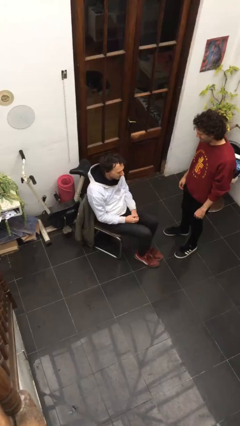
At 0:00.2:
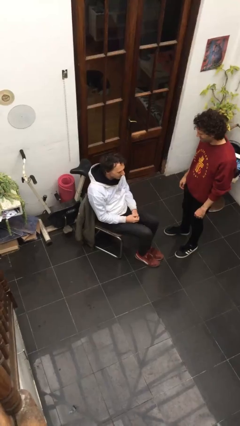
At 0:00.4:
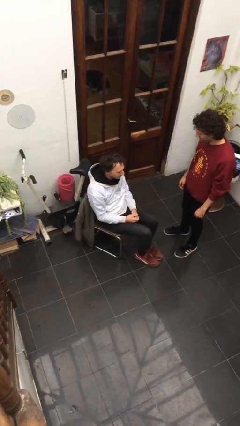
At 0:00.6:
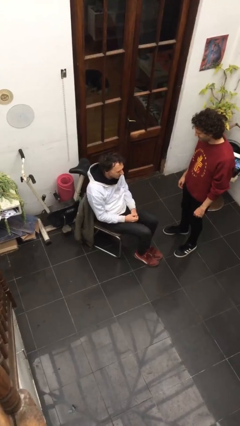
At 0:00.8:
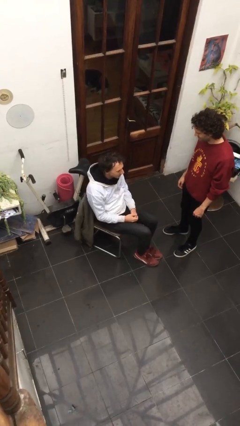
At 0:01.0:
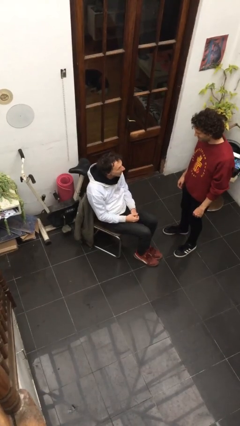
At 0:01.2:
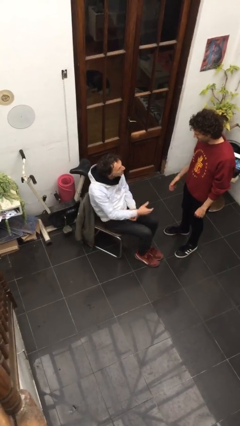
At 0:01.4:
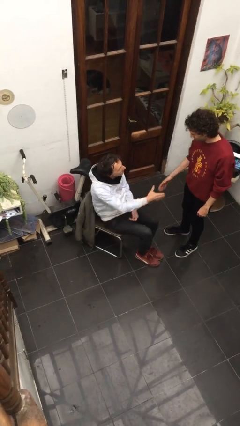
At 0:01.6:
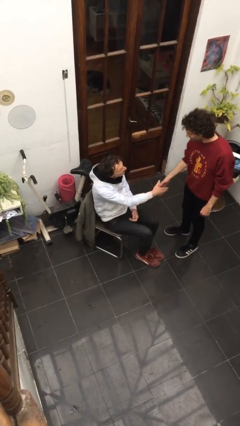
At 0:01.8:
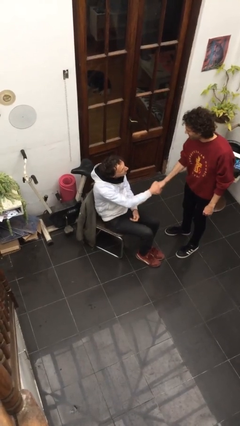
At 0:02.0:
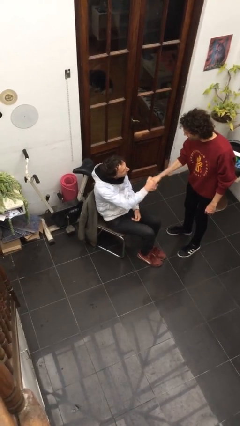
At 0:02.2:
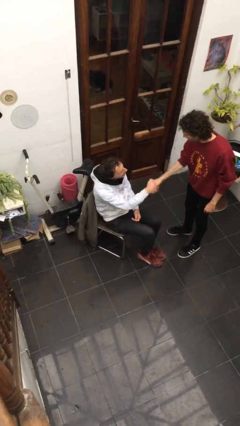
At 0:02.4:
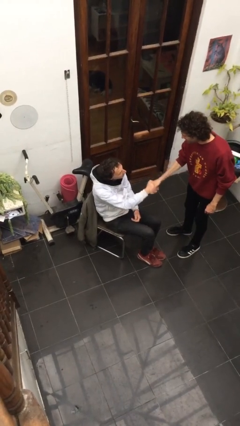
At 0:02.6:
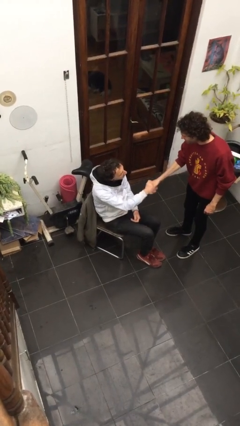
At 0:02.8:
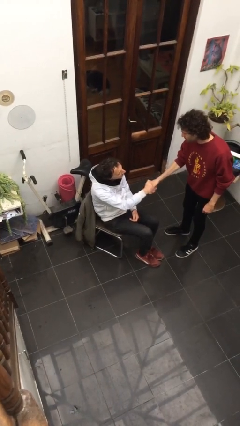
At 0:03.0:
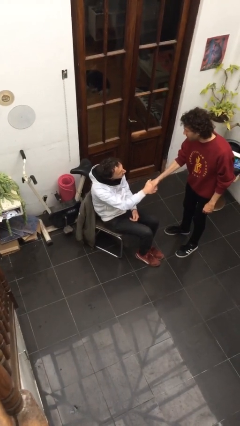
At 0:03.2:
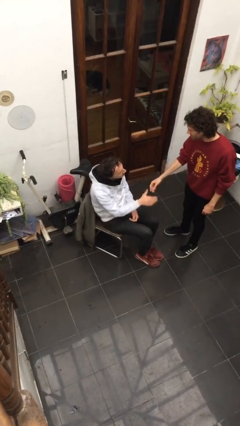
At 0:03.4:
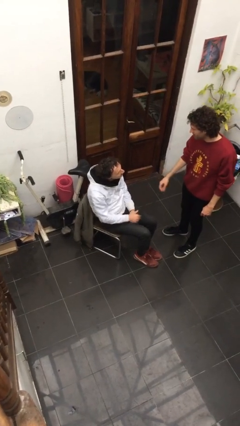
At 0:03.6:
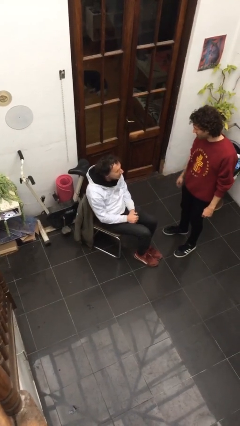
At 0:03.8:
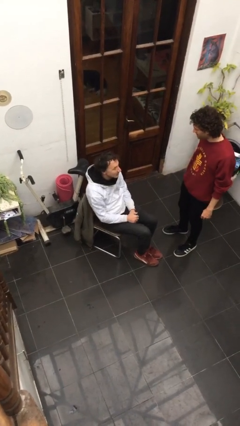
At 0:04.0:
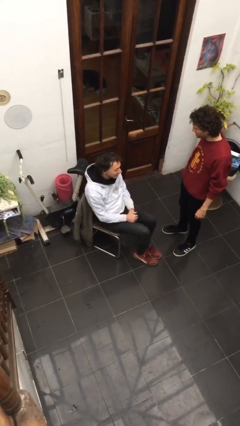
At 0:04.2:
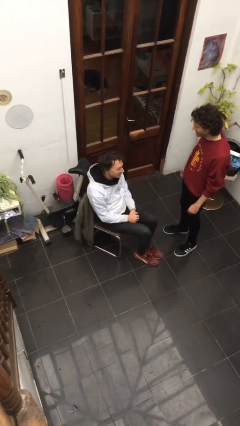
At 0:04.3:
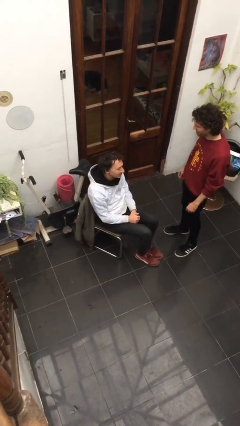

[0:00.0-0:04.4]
person shakes hand

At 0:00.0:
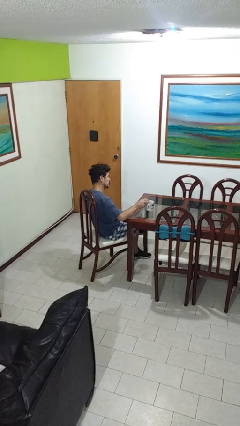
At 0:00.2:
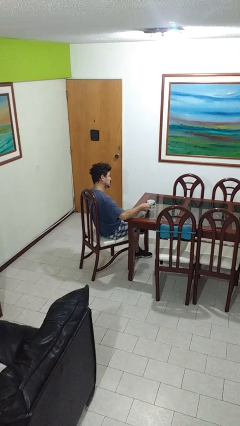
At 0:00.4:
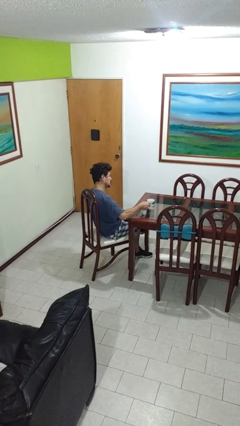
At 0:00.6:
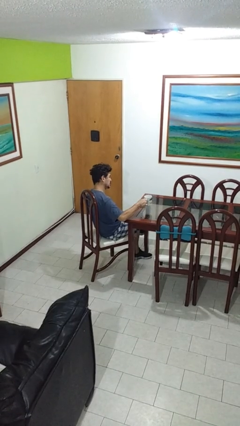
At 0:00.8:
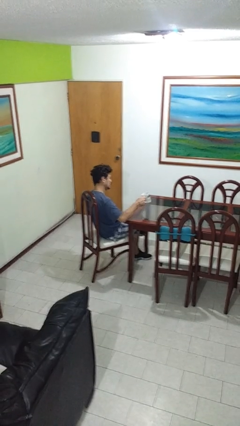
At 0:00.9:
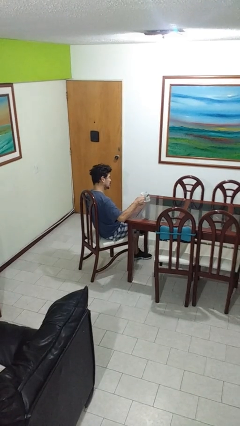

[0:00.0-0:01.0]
person picks up object from table

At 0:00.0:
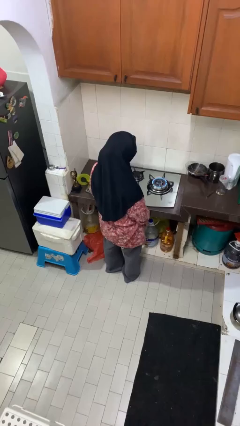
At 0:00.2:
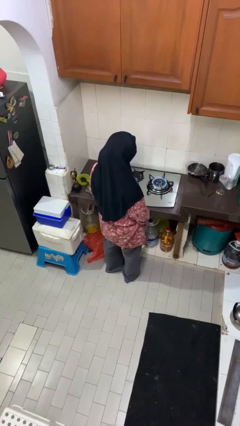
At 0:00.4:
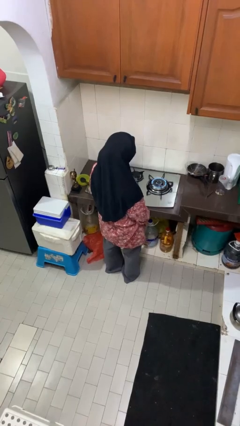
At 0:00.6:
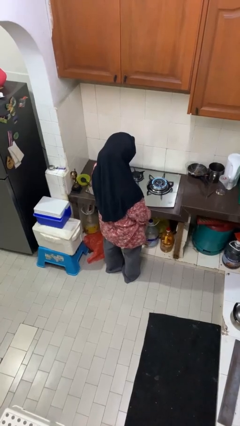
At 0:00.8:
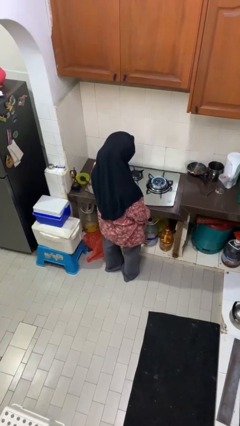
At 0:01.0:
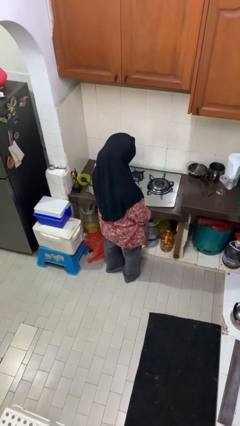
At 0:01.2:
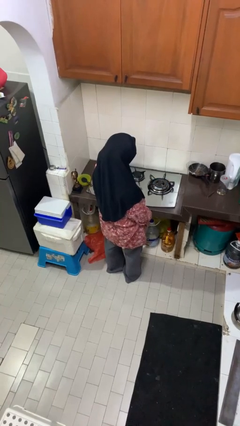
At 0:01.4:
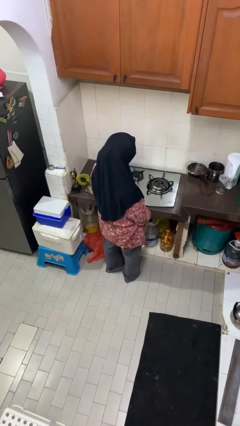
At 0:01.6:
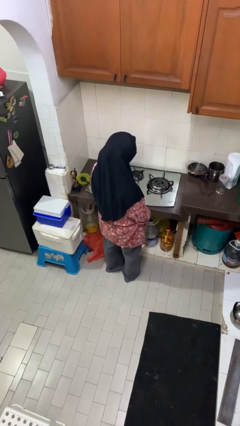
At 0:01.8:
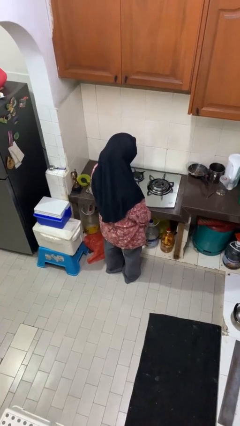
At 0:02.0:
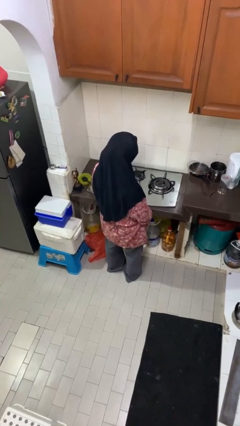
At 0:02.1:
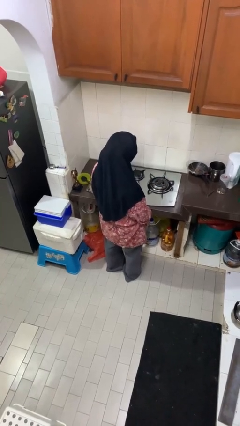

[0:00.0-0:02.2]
person turns off stovetop

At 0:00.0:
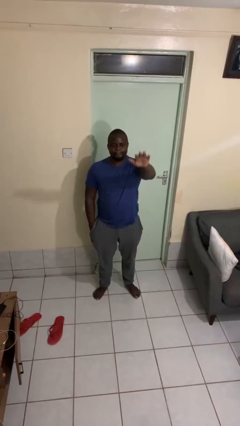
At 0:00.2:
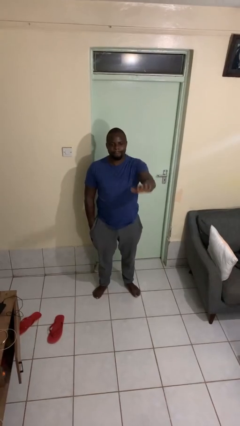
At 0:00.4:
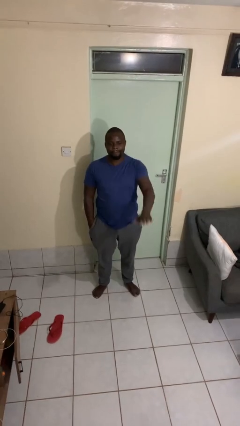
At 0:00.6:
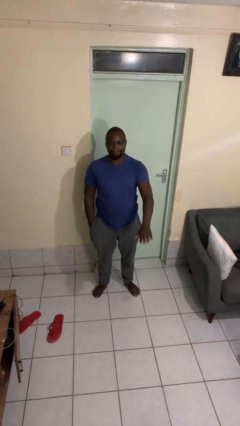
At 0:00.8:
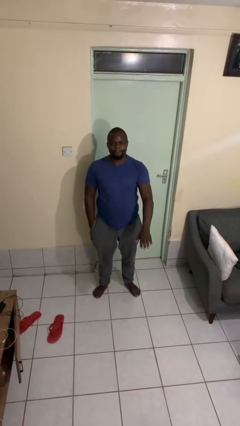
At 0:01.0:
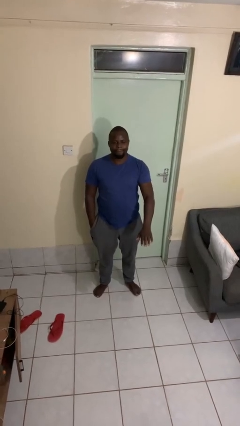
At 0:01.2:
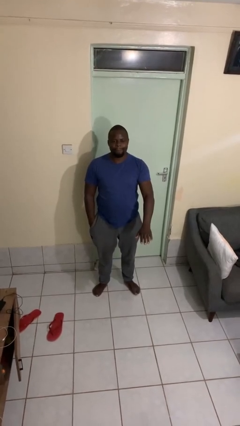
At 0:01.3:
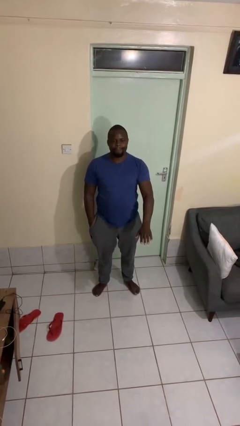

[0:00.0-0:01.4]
person gestures swipe down

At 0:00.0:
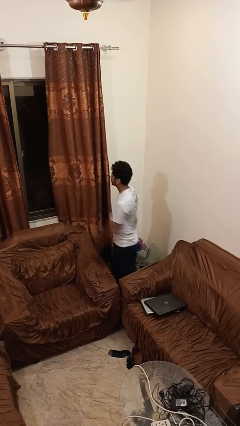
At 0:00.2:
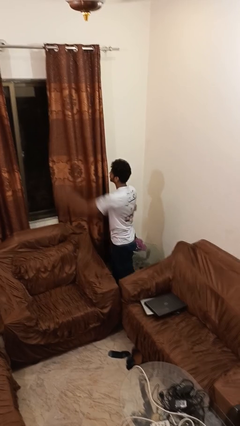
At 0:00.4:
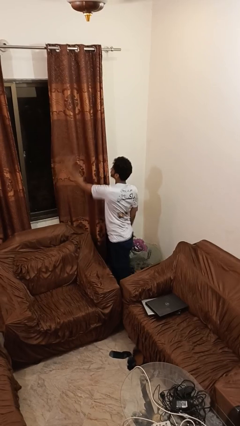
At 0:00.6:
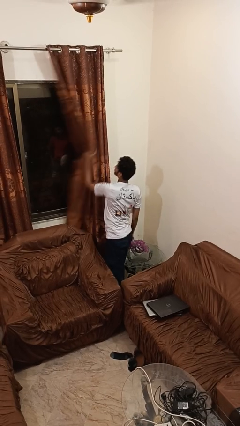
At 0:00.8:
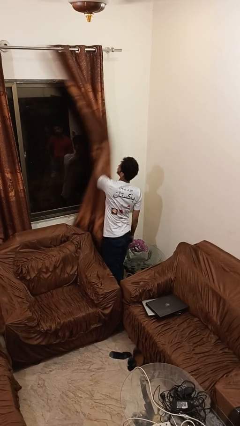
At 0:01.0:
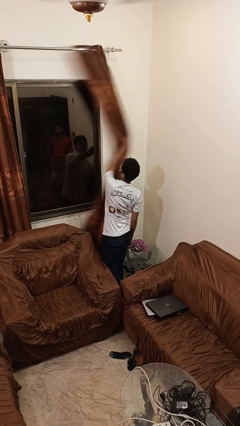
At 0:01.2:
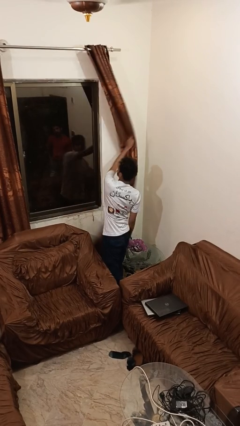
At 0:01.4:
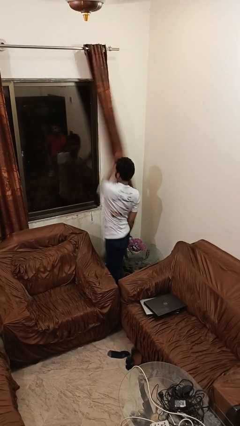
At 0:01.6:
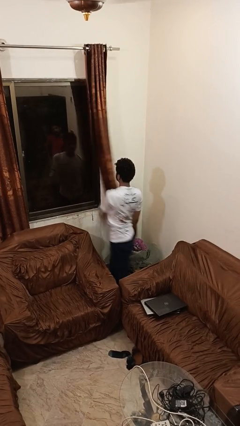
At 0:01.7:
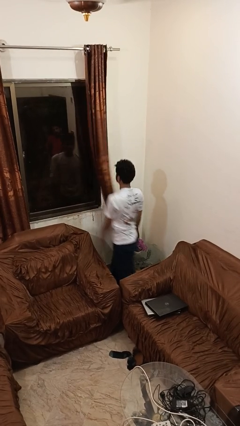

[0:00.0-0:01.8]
person opens curtains

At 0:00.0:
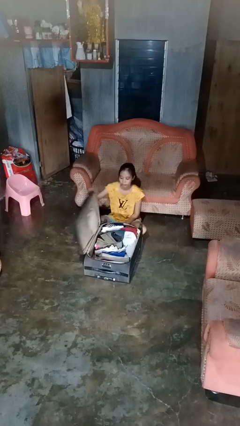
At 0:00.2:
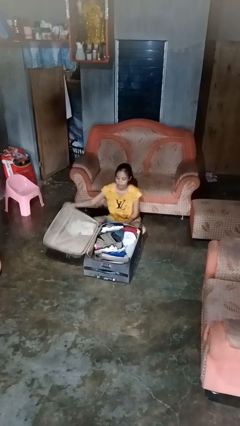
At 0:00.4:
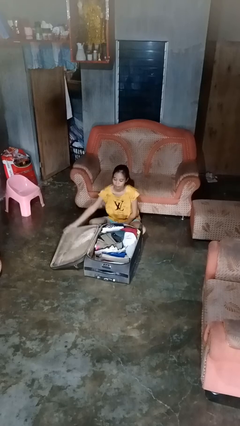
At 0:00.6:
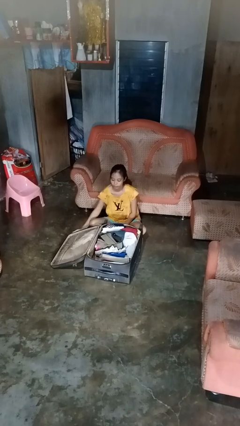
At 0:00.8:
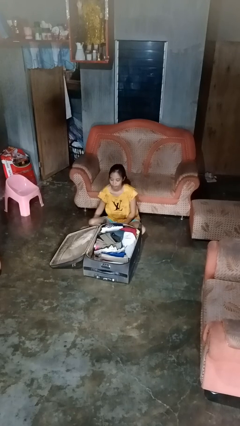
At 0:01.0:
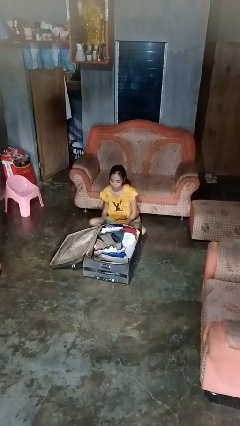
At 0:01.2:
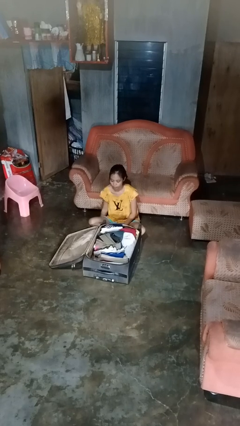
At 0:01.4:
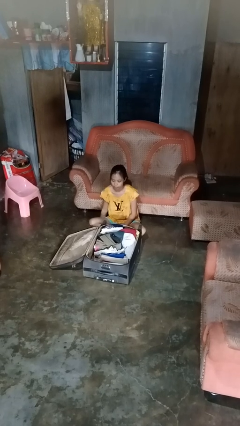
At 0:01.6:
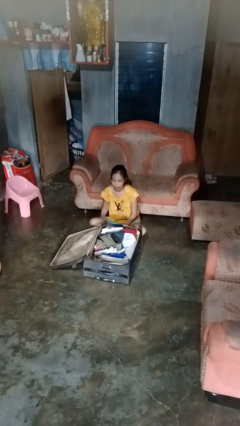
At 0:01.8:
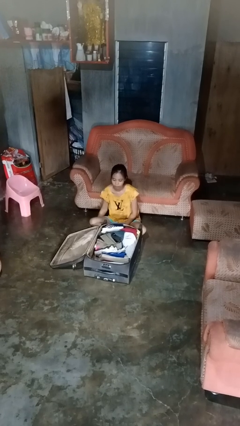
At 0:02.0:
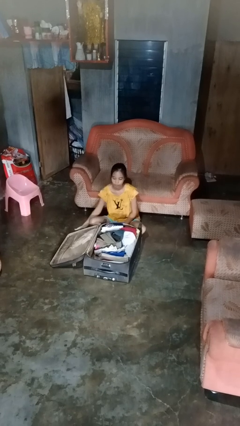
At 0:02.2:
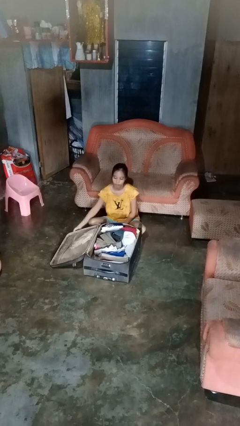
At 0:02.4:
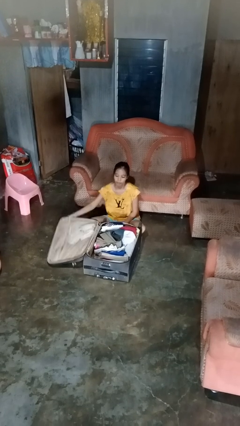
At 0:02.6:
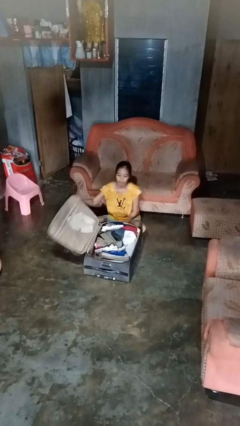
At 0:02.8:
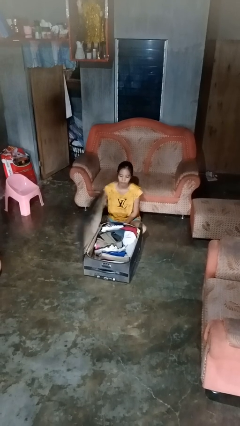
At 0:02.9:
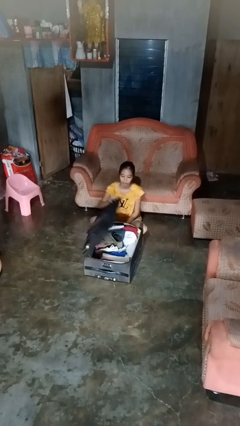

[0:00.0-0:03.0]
person opens suitcase

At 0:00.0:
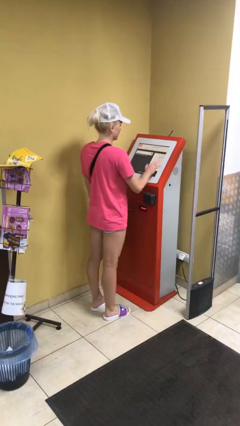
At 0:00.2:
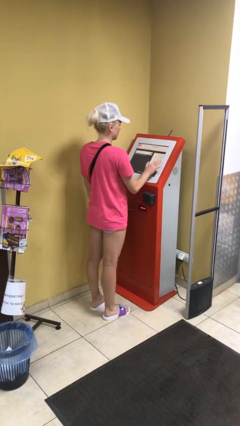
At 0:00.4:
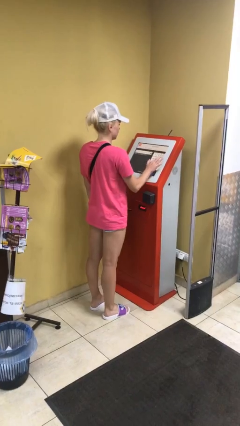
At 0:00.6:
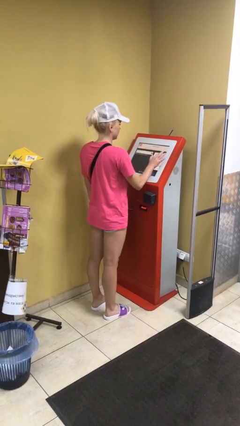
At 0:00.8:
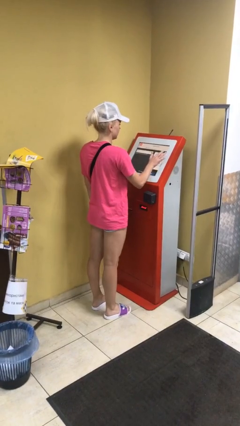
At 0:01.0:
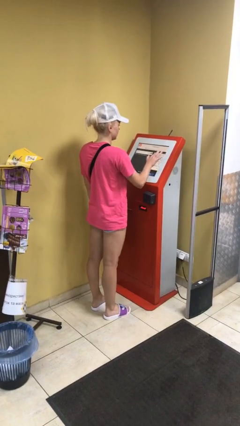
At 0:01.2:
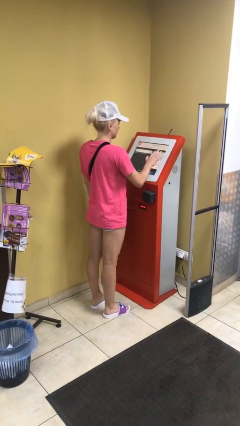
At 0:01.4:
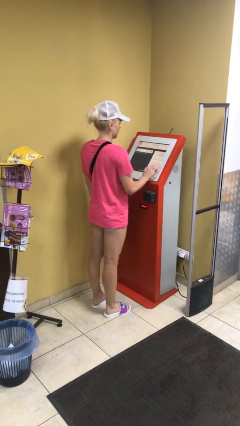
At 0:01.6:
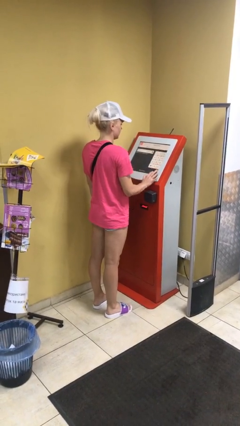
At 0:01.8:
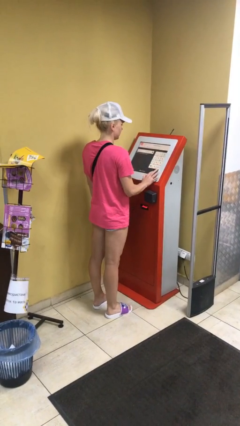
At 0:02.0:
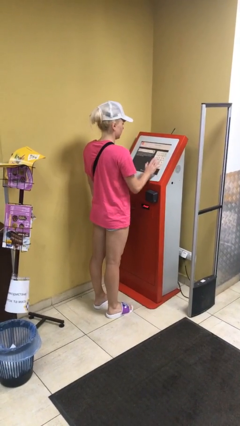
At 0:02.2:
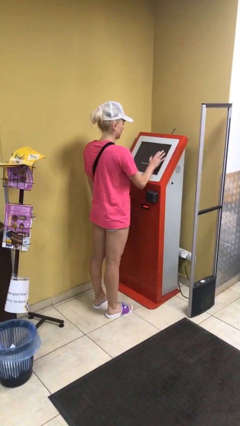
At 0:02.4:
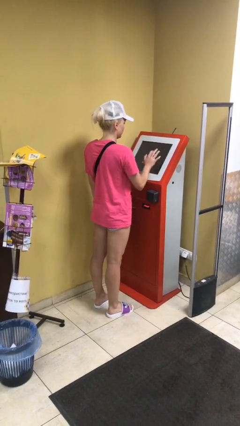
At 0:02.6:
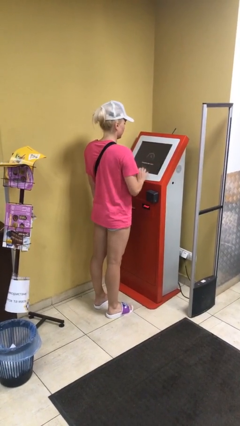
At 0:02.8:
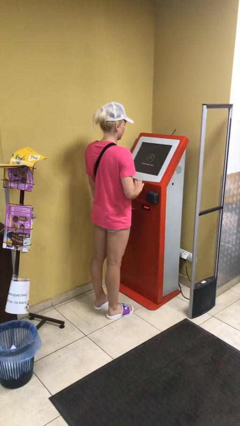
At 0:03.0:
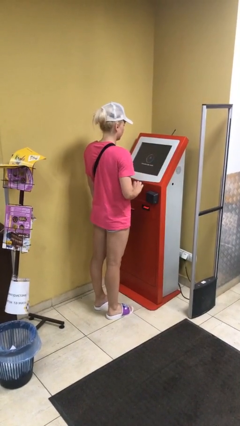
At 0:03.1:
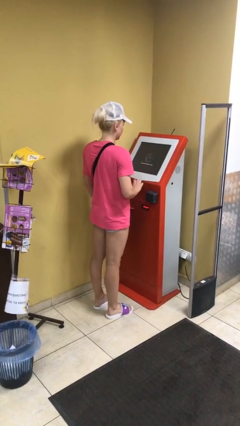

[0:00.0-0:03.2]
person purchases from machine

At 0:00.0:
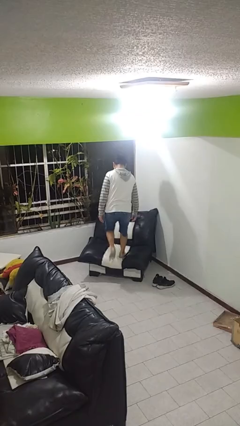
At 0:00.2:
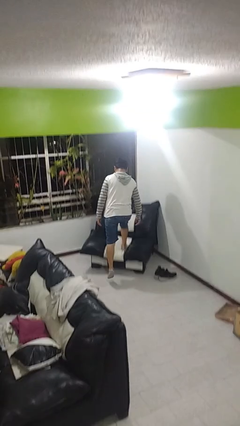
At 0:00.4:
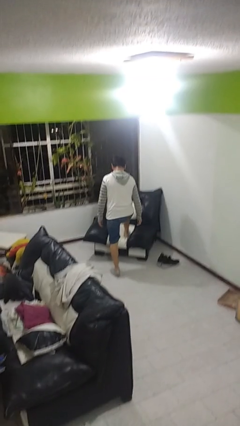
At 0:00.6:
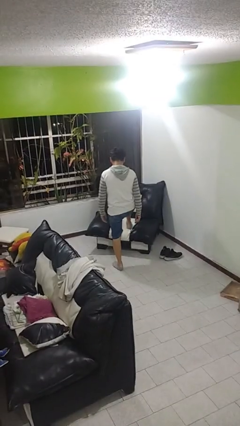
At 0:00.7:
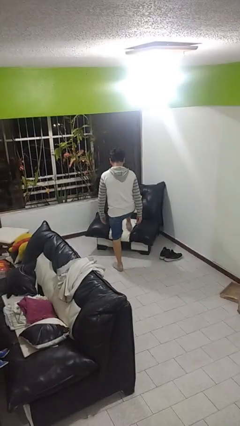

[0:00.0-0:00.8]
person climbs off couch
